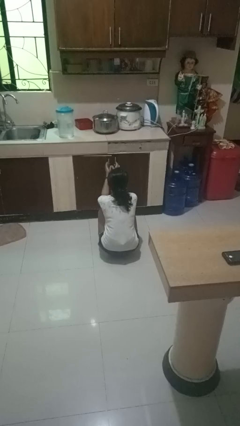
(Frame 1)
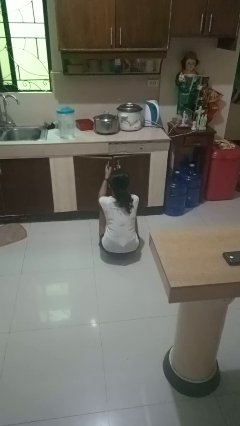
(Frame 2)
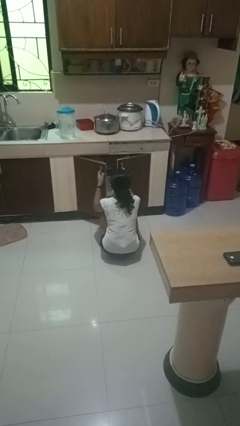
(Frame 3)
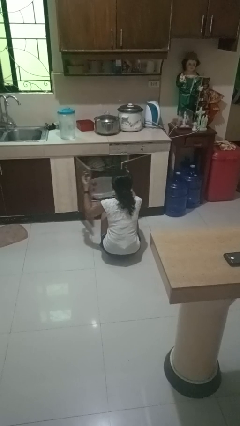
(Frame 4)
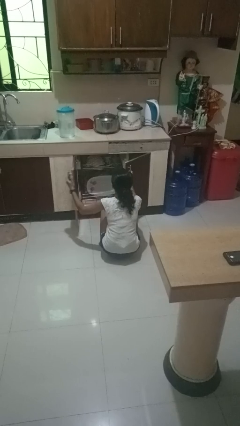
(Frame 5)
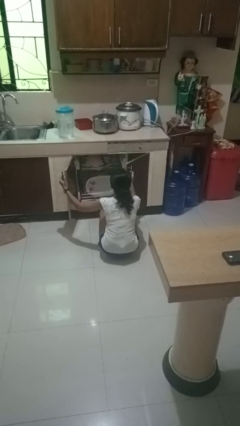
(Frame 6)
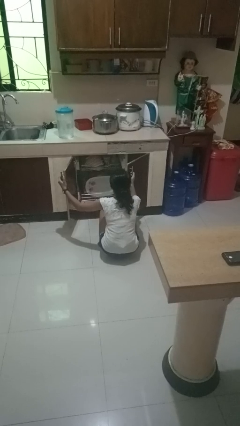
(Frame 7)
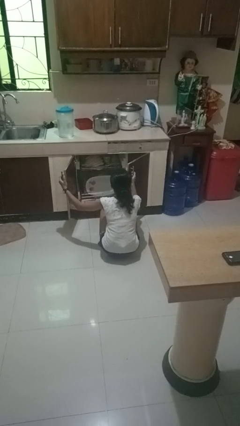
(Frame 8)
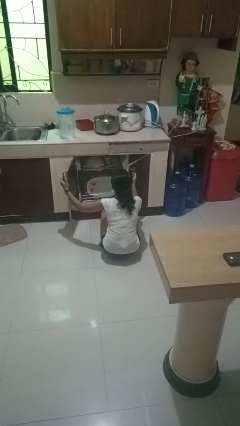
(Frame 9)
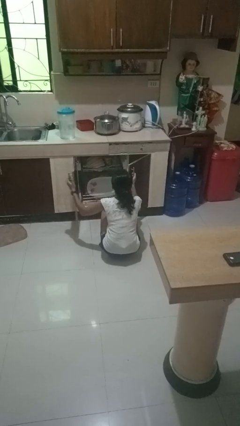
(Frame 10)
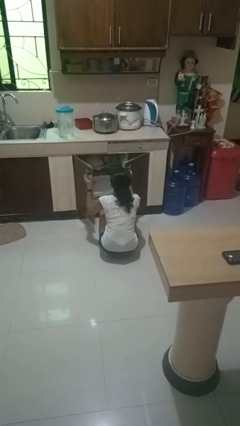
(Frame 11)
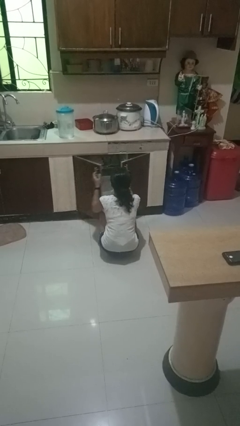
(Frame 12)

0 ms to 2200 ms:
person opens dishwasher

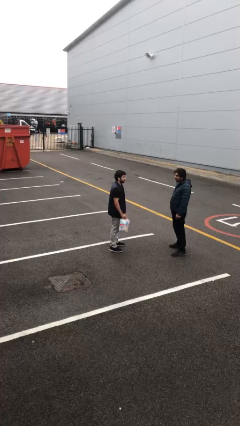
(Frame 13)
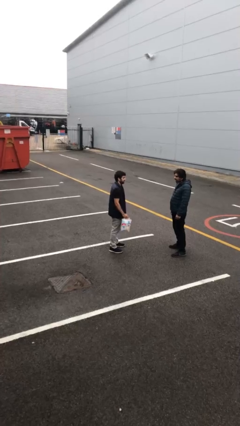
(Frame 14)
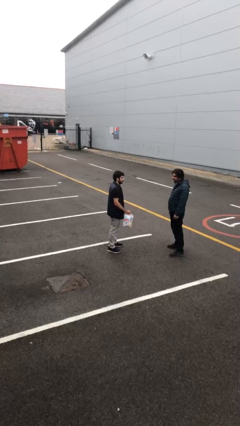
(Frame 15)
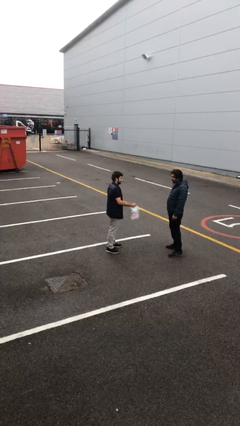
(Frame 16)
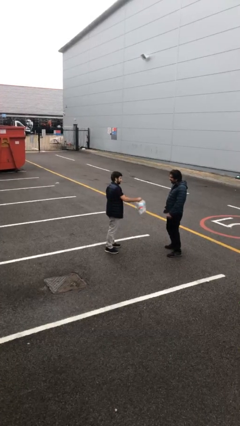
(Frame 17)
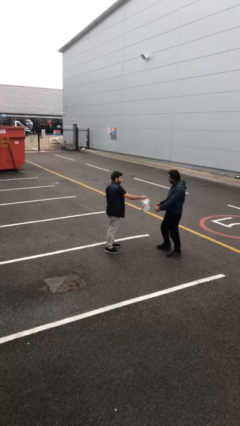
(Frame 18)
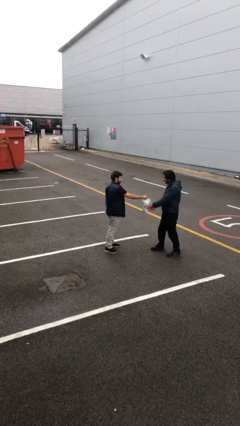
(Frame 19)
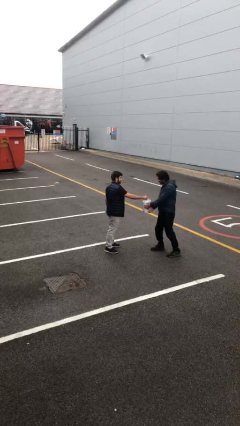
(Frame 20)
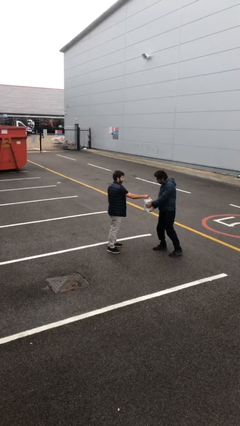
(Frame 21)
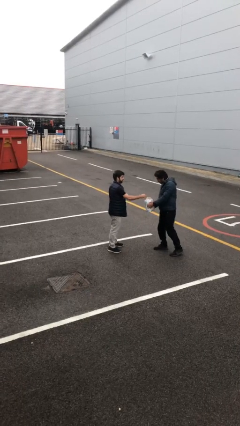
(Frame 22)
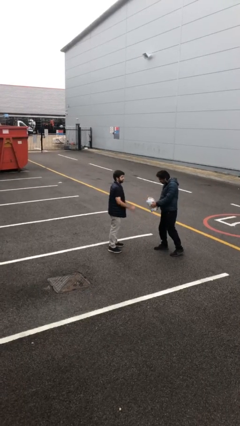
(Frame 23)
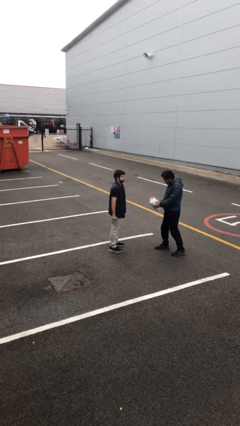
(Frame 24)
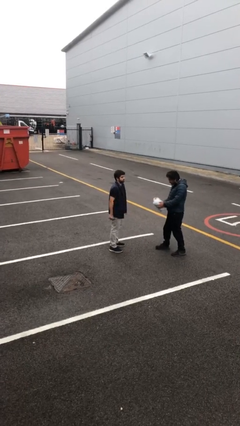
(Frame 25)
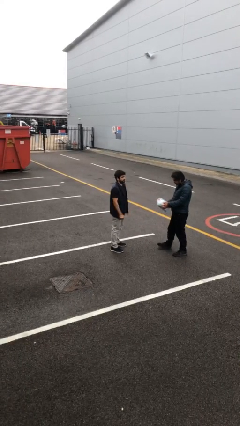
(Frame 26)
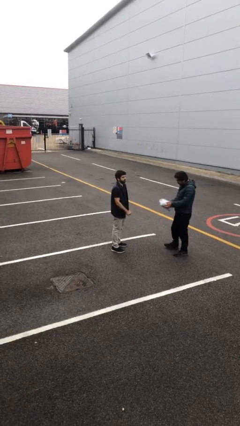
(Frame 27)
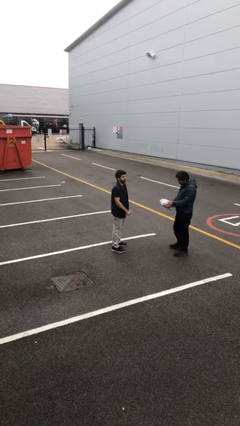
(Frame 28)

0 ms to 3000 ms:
person transfers object to person

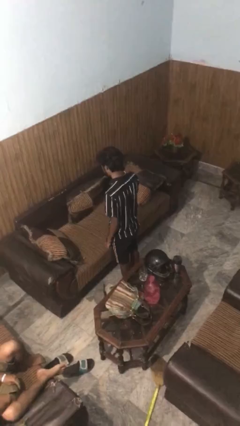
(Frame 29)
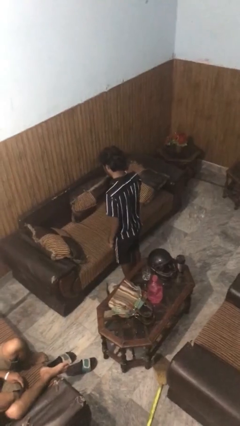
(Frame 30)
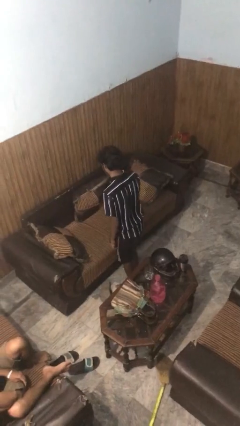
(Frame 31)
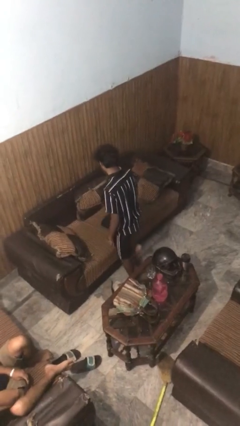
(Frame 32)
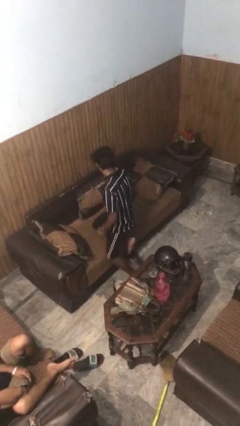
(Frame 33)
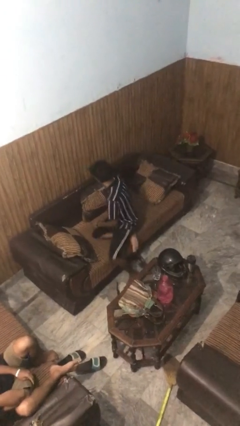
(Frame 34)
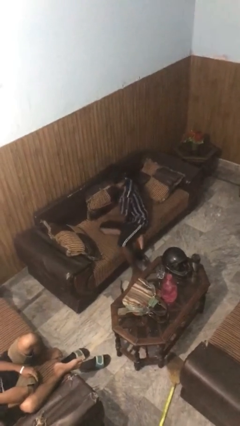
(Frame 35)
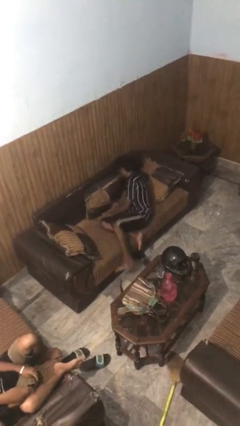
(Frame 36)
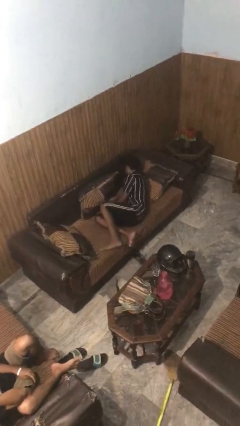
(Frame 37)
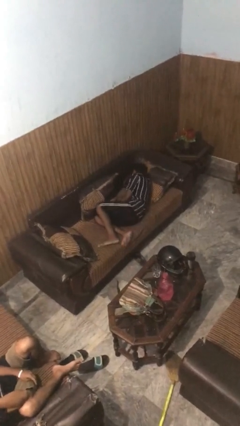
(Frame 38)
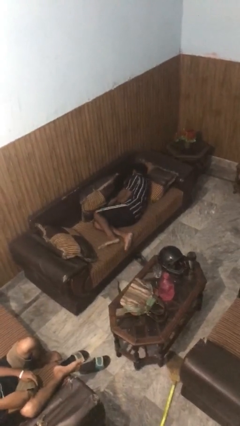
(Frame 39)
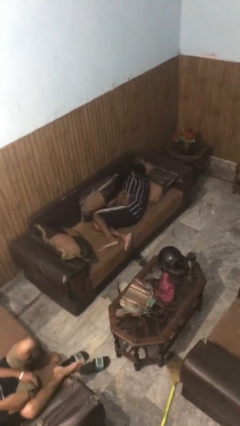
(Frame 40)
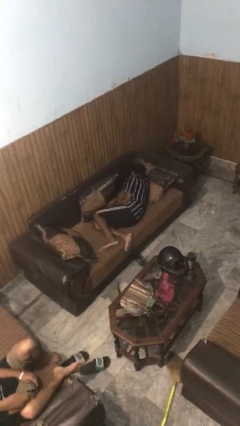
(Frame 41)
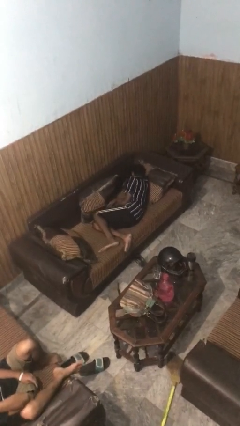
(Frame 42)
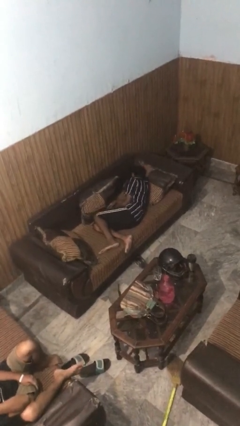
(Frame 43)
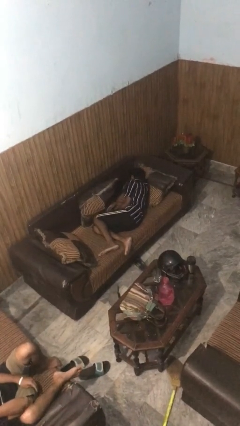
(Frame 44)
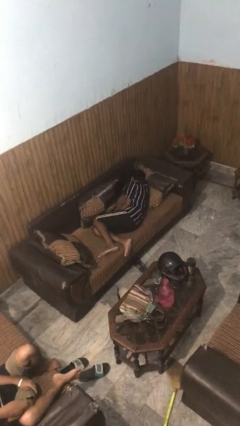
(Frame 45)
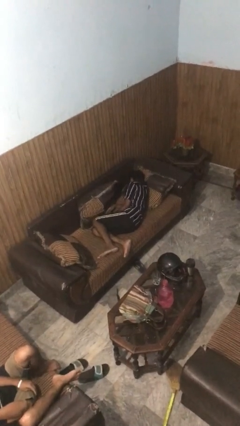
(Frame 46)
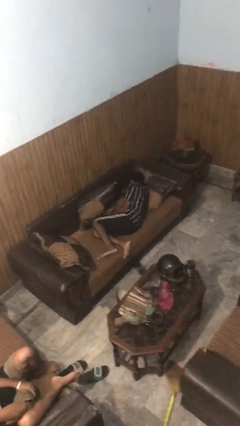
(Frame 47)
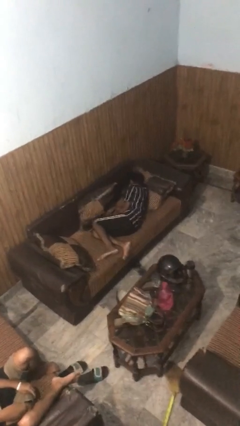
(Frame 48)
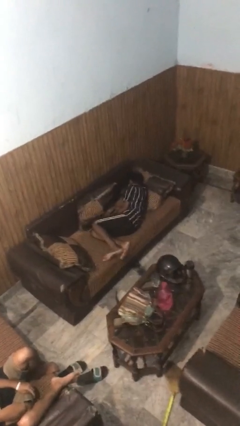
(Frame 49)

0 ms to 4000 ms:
person lies down on couch

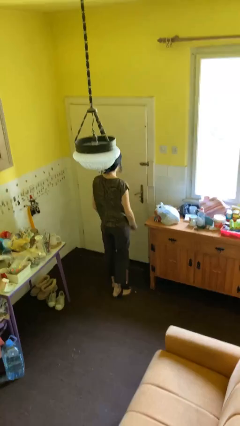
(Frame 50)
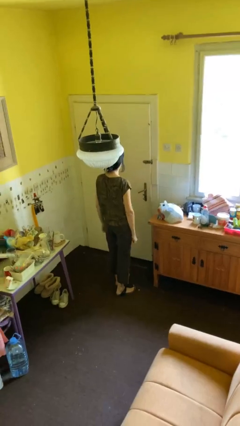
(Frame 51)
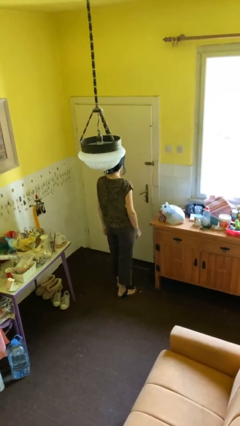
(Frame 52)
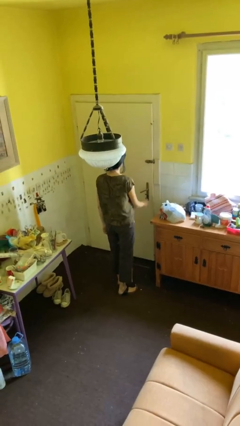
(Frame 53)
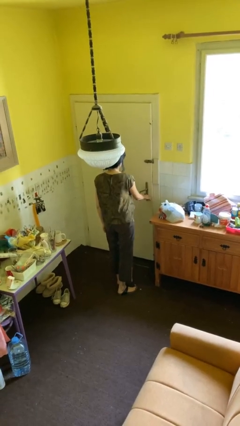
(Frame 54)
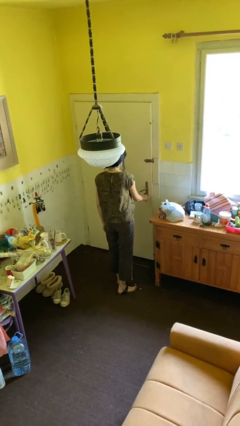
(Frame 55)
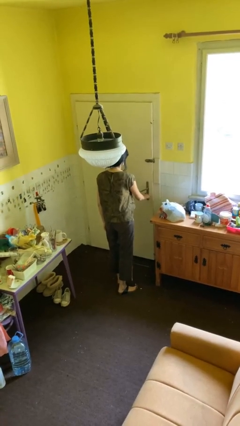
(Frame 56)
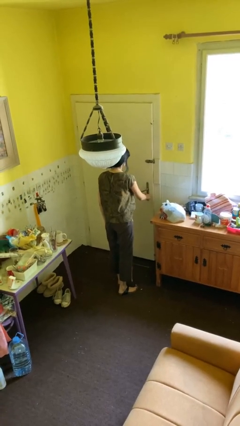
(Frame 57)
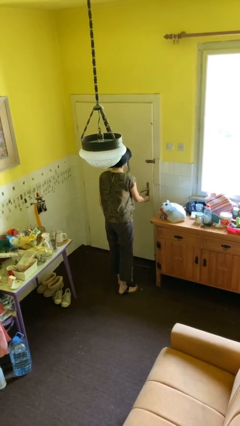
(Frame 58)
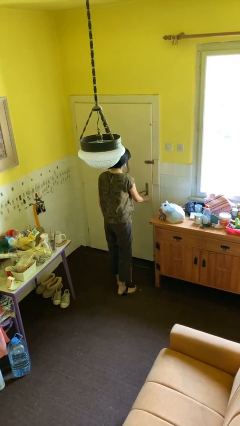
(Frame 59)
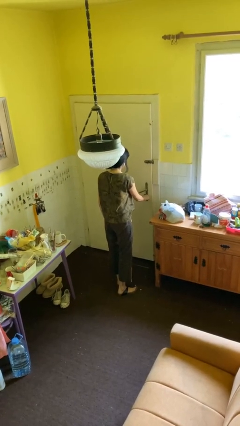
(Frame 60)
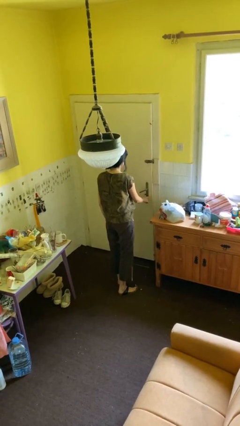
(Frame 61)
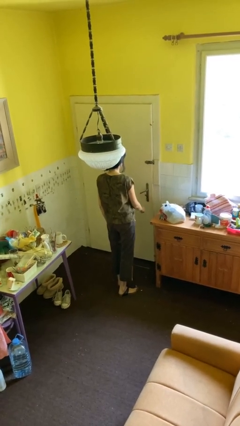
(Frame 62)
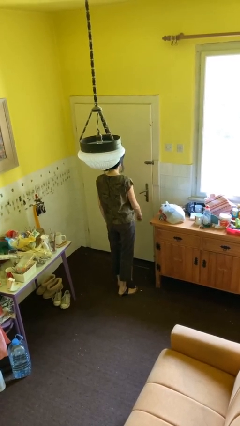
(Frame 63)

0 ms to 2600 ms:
person locks door with keys

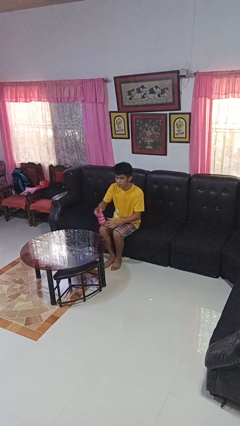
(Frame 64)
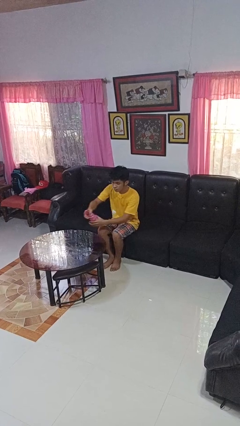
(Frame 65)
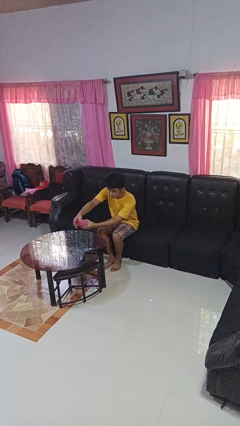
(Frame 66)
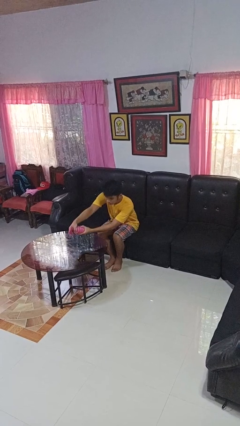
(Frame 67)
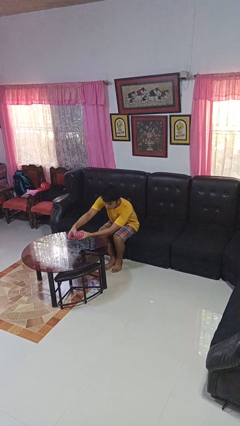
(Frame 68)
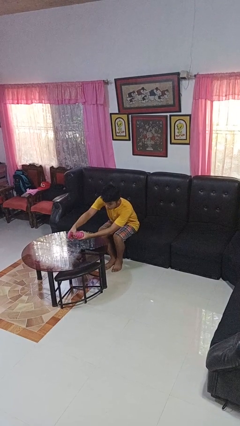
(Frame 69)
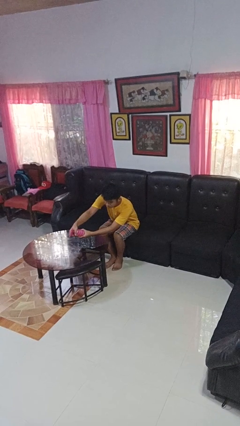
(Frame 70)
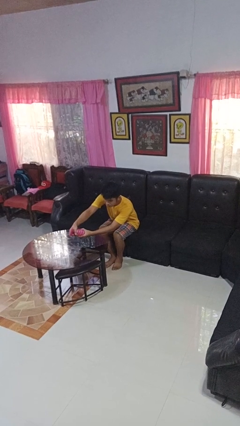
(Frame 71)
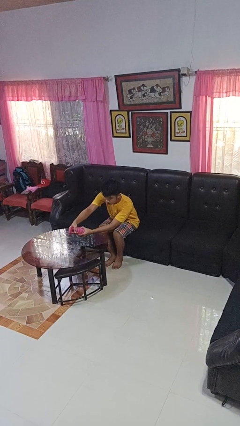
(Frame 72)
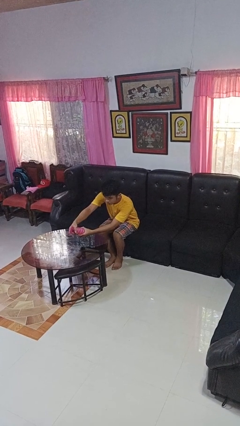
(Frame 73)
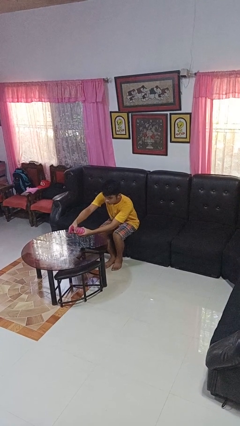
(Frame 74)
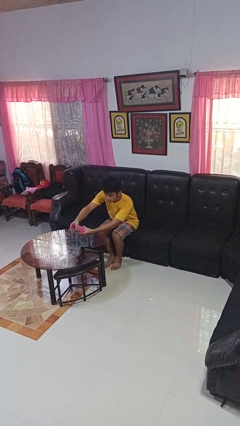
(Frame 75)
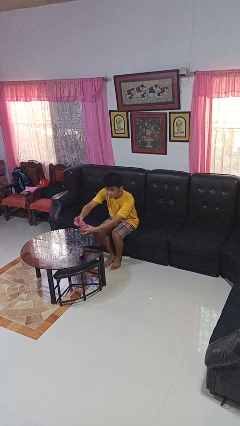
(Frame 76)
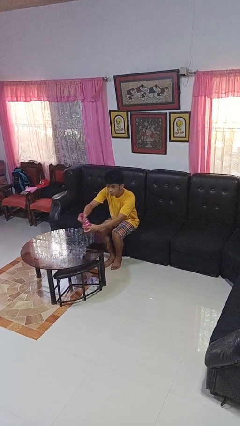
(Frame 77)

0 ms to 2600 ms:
person sprays from bottle

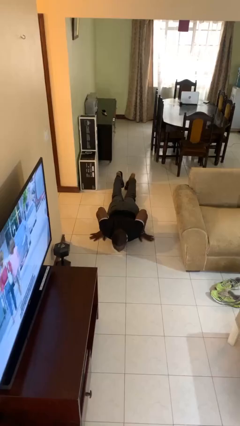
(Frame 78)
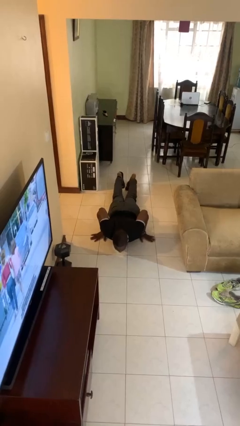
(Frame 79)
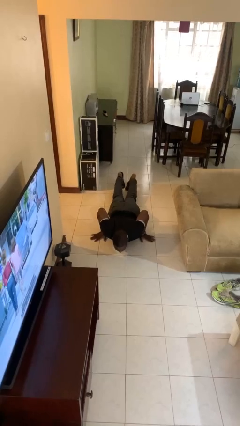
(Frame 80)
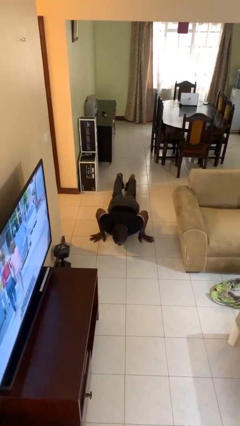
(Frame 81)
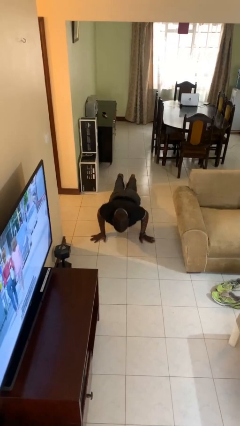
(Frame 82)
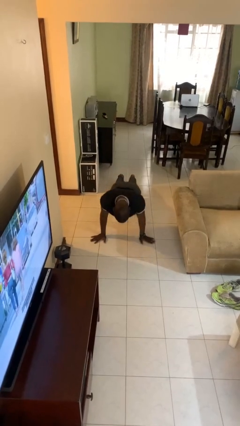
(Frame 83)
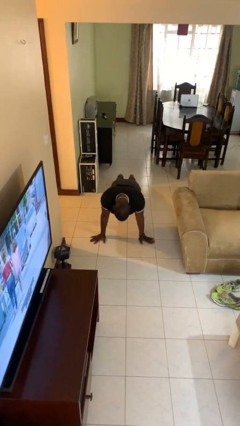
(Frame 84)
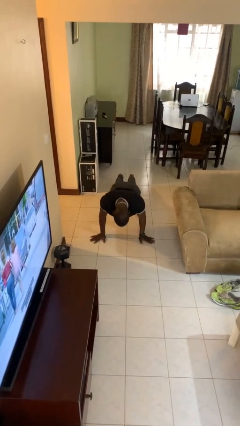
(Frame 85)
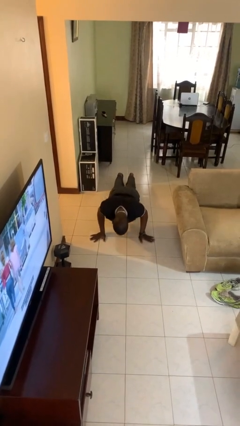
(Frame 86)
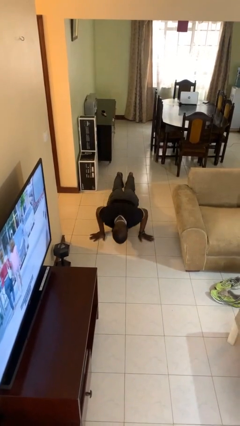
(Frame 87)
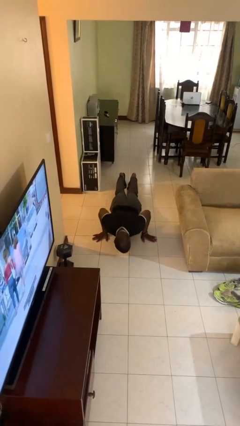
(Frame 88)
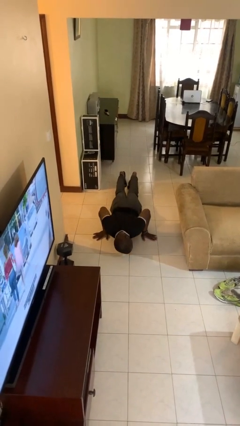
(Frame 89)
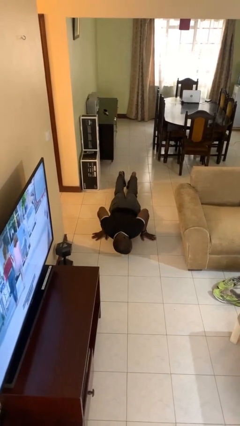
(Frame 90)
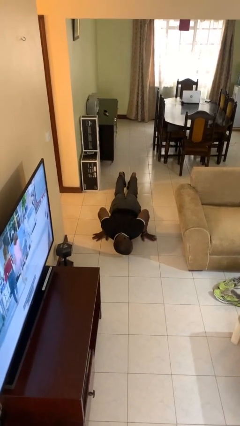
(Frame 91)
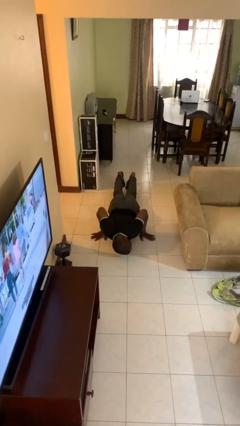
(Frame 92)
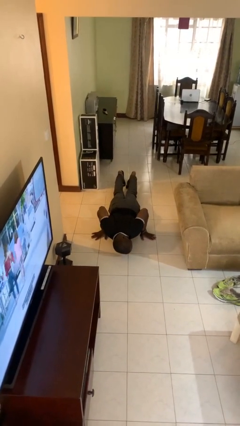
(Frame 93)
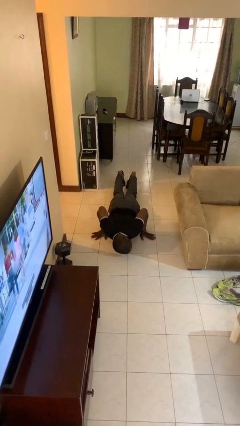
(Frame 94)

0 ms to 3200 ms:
person exercises with pushup
